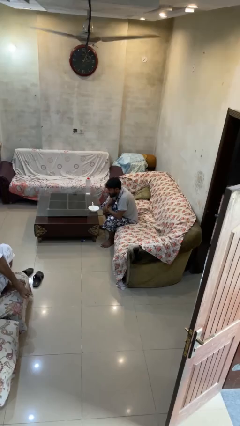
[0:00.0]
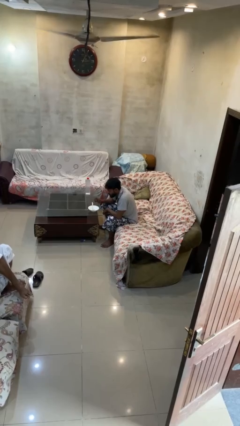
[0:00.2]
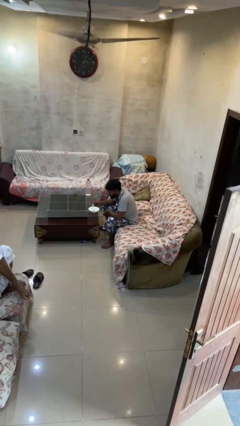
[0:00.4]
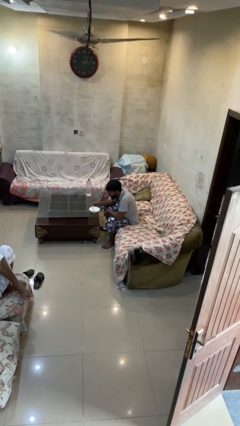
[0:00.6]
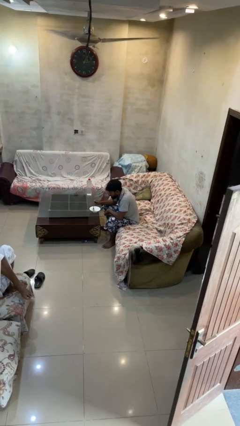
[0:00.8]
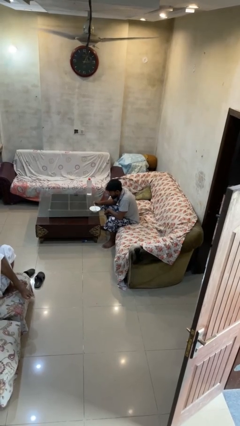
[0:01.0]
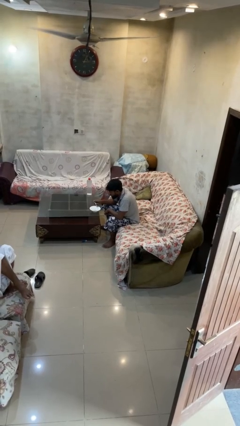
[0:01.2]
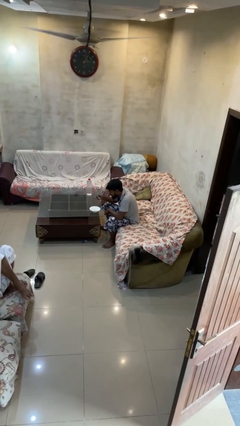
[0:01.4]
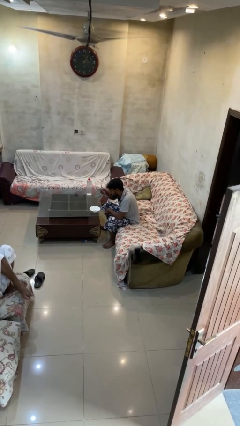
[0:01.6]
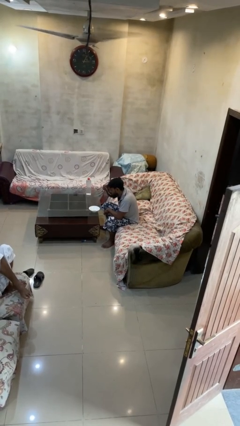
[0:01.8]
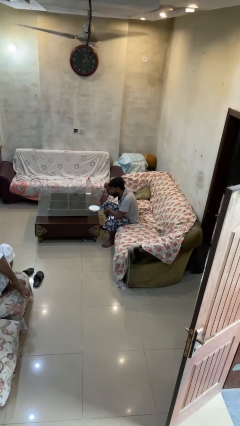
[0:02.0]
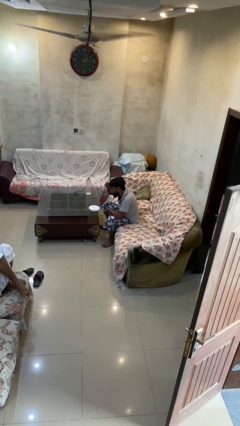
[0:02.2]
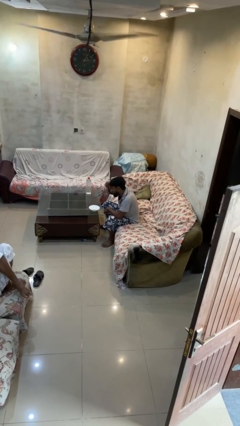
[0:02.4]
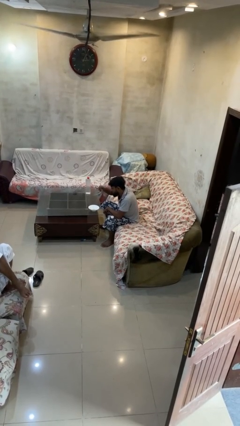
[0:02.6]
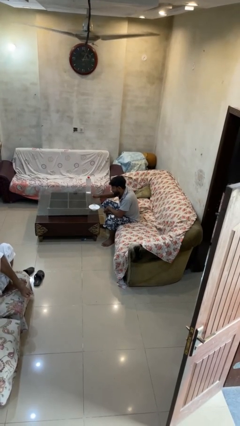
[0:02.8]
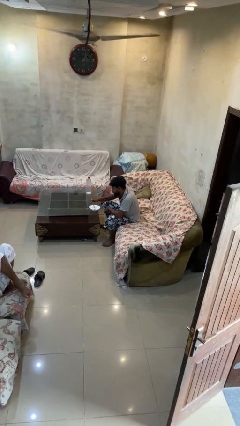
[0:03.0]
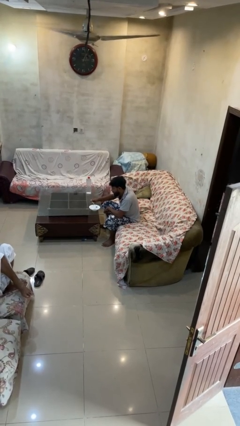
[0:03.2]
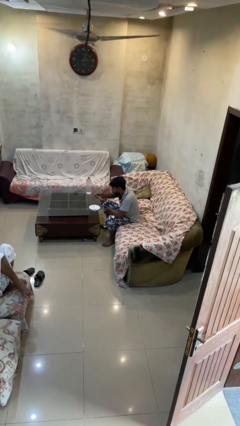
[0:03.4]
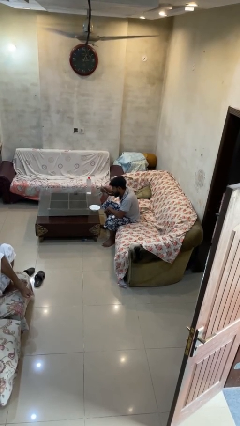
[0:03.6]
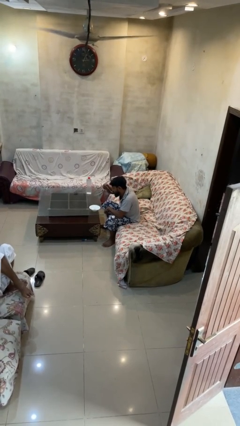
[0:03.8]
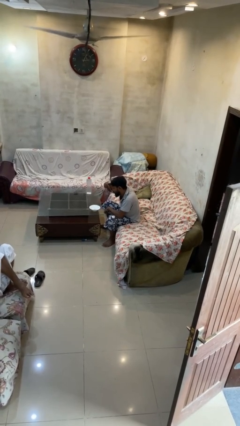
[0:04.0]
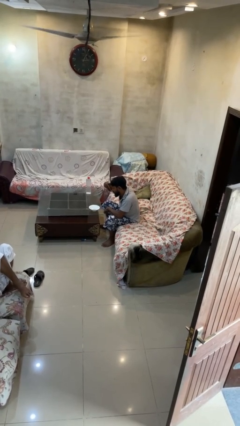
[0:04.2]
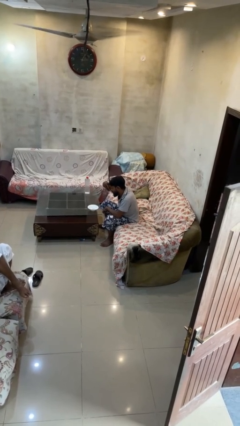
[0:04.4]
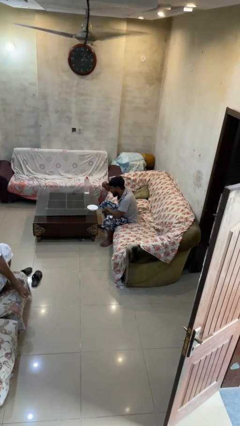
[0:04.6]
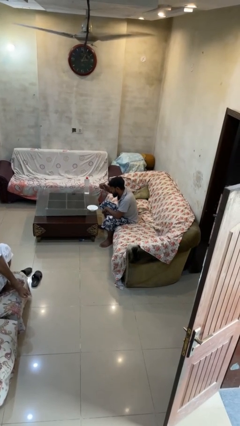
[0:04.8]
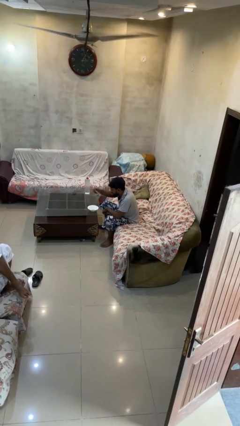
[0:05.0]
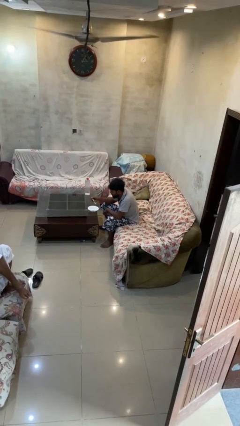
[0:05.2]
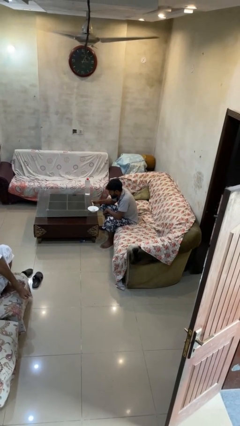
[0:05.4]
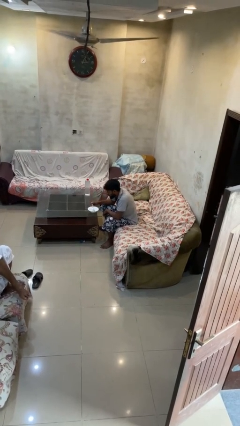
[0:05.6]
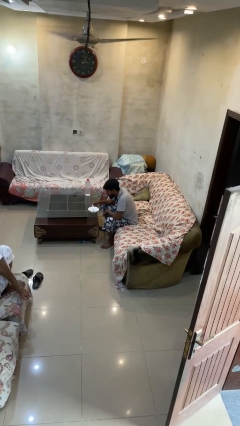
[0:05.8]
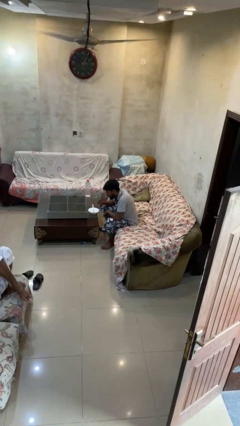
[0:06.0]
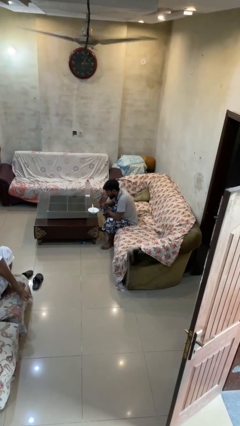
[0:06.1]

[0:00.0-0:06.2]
person eats with utensil

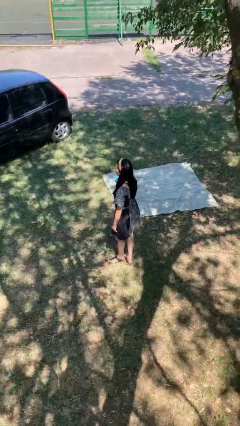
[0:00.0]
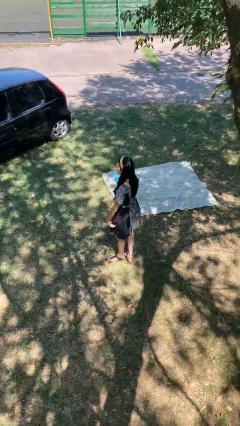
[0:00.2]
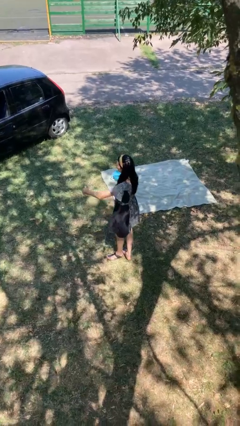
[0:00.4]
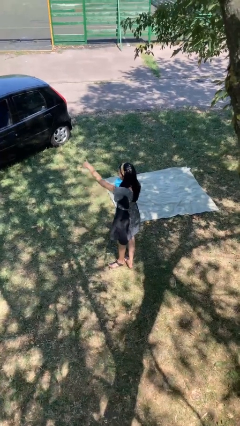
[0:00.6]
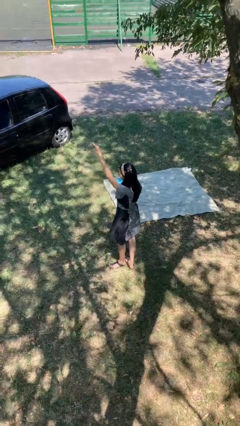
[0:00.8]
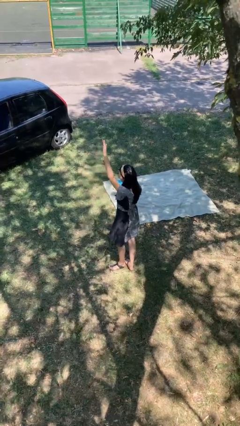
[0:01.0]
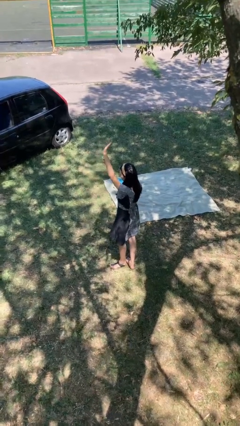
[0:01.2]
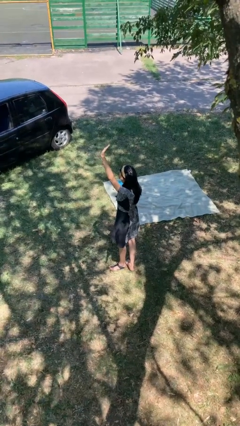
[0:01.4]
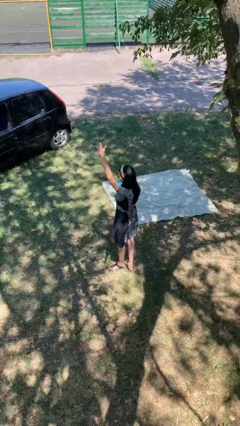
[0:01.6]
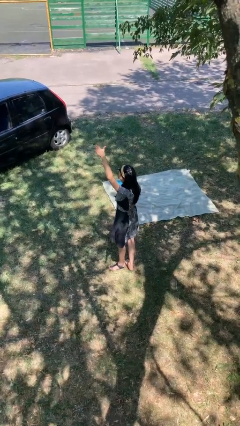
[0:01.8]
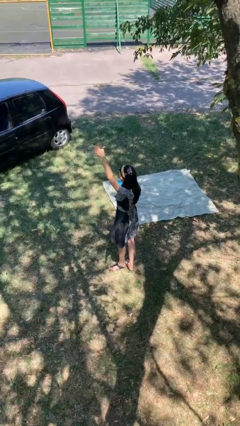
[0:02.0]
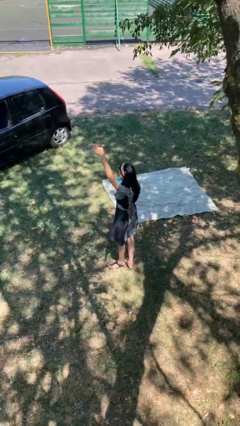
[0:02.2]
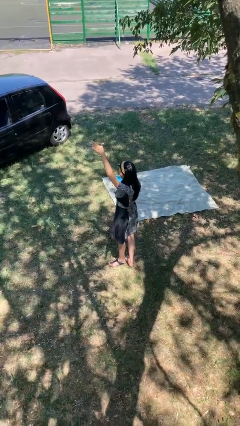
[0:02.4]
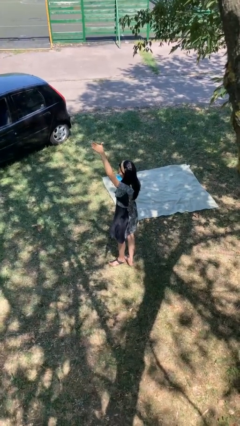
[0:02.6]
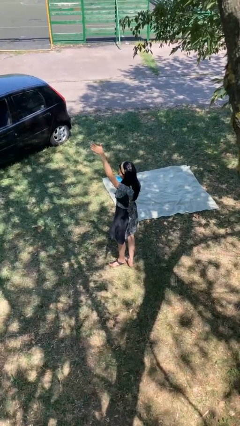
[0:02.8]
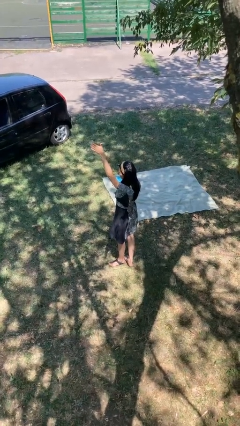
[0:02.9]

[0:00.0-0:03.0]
person gestures raise hand

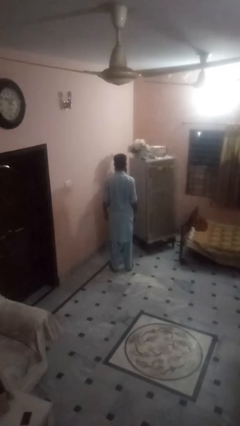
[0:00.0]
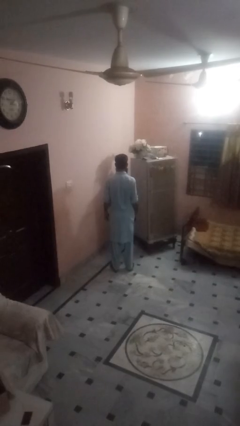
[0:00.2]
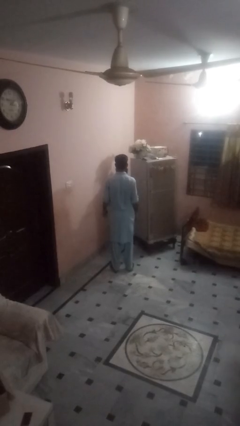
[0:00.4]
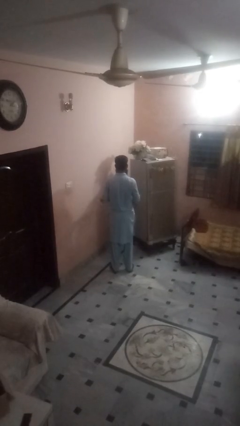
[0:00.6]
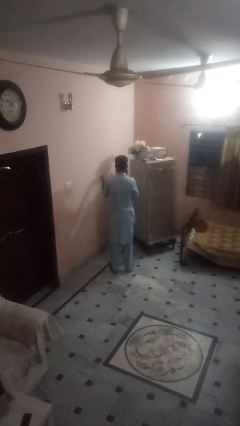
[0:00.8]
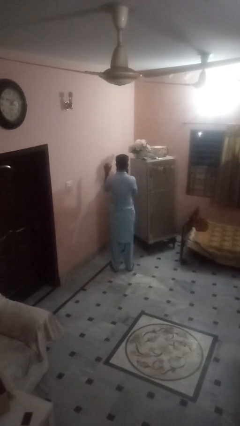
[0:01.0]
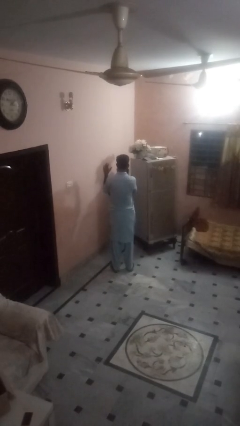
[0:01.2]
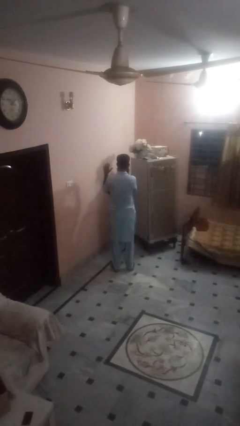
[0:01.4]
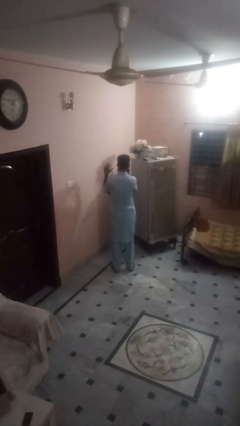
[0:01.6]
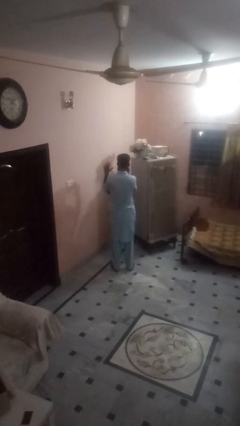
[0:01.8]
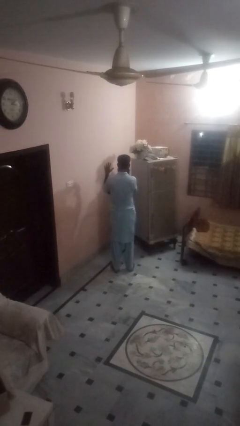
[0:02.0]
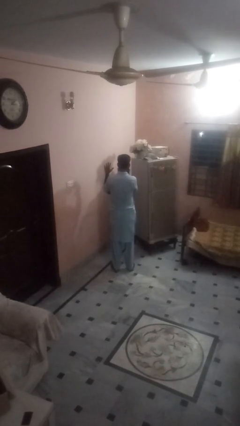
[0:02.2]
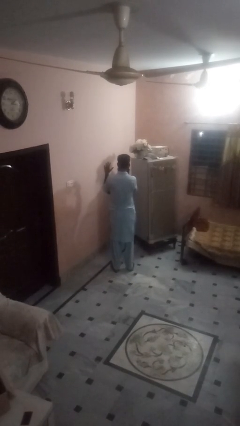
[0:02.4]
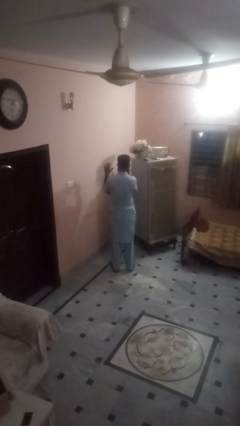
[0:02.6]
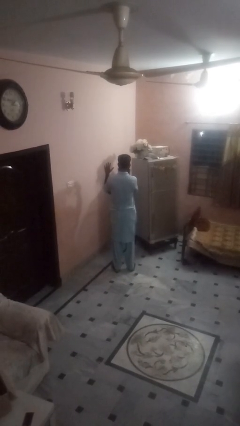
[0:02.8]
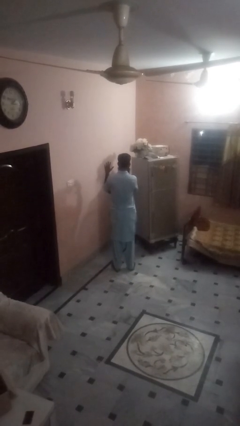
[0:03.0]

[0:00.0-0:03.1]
person gestures number five

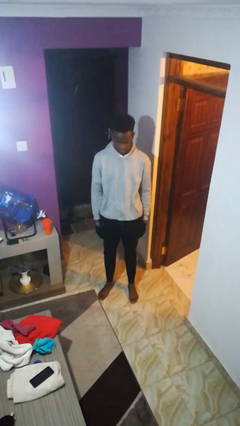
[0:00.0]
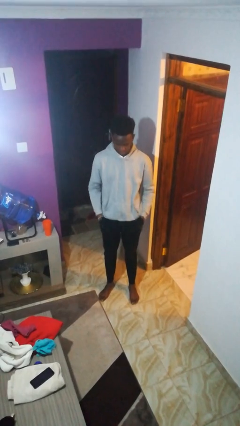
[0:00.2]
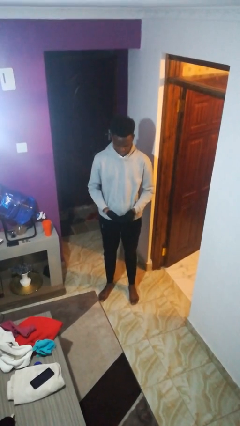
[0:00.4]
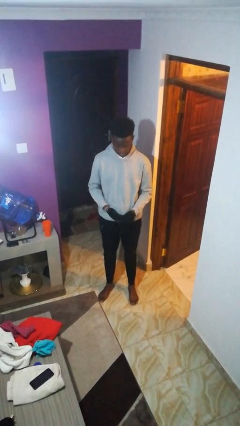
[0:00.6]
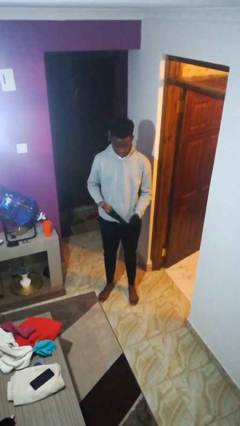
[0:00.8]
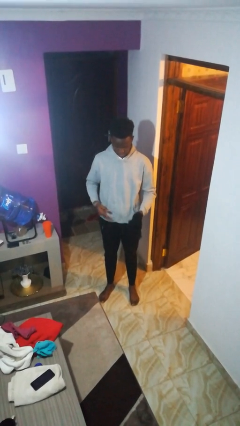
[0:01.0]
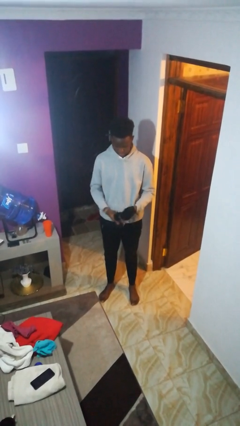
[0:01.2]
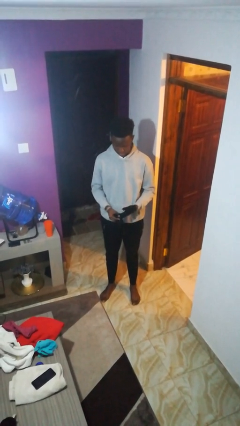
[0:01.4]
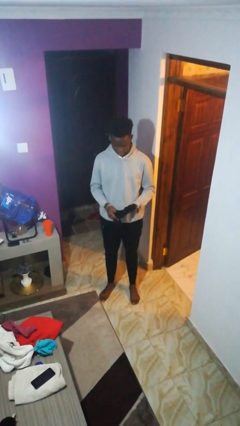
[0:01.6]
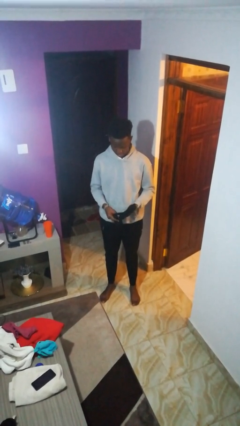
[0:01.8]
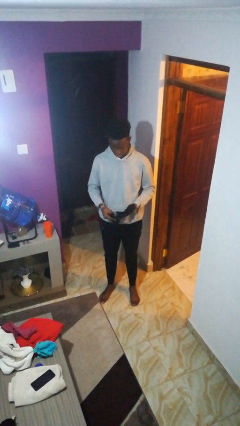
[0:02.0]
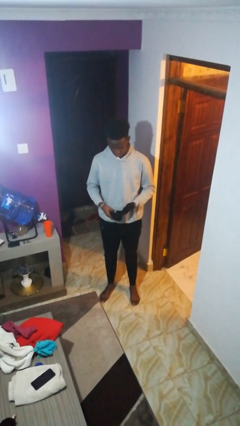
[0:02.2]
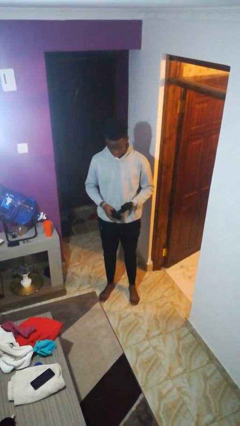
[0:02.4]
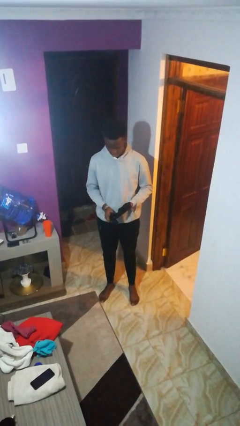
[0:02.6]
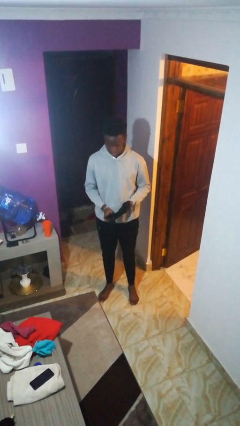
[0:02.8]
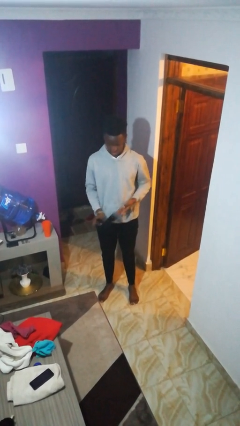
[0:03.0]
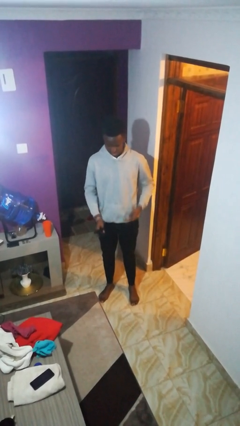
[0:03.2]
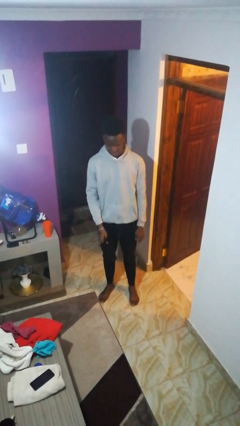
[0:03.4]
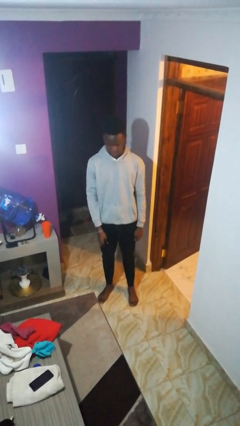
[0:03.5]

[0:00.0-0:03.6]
person takes off gloves

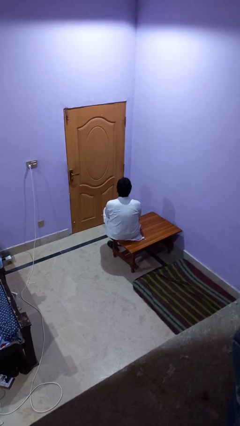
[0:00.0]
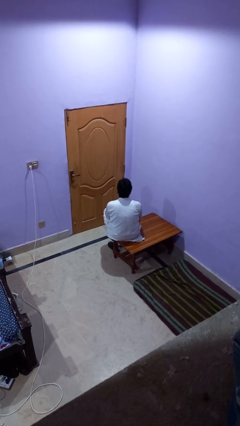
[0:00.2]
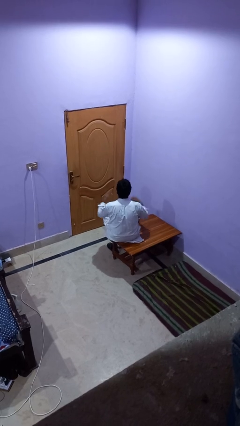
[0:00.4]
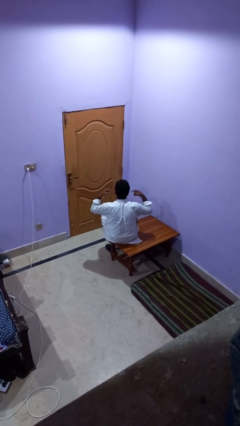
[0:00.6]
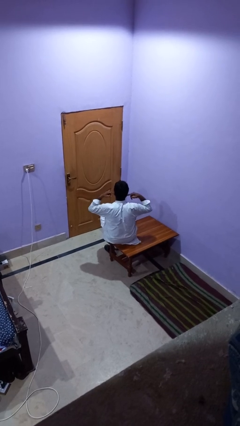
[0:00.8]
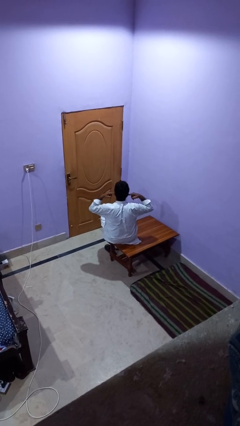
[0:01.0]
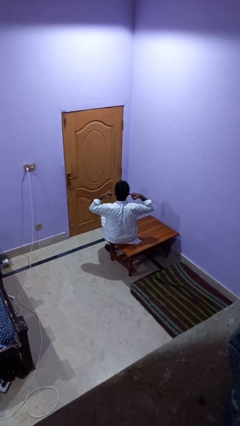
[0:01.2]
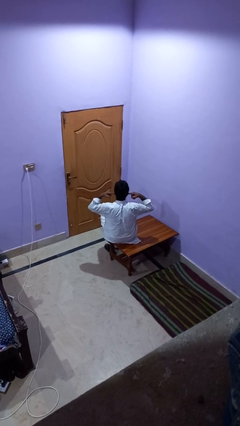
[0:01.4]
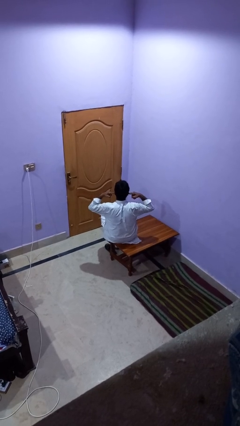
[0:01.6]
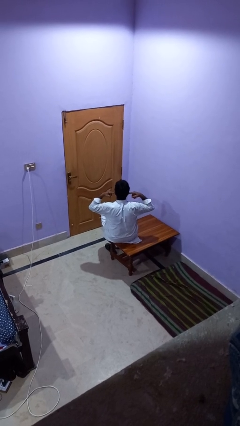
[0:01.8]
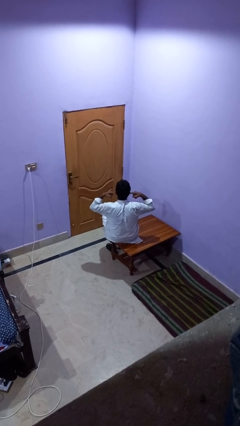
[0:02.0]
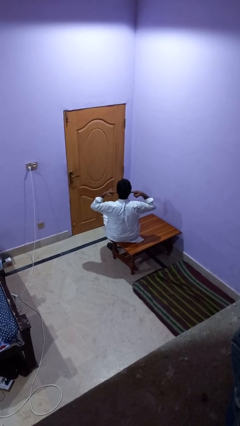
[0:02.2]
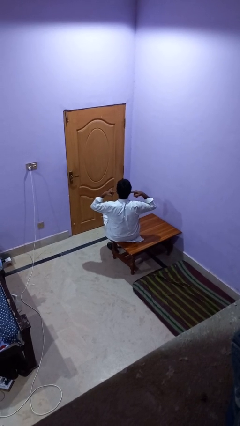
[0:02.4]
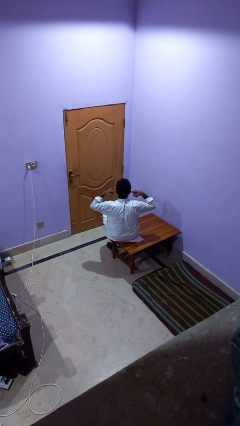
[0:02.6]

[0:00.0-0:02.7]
person puts fingers in ear
